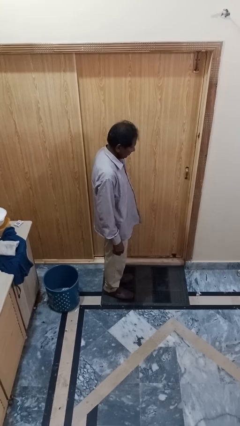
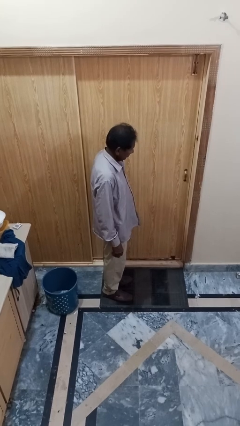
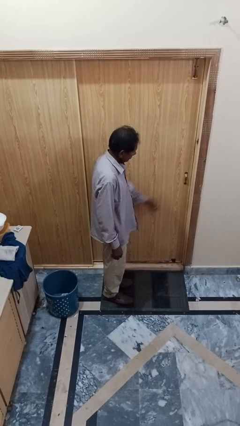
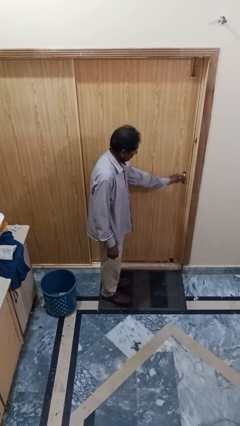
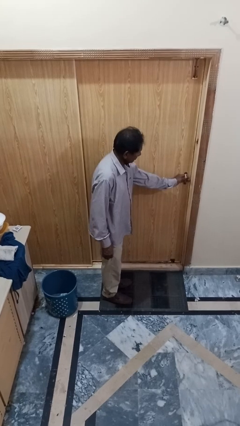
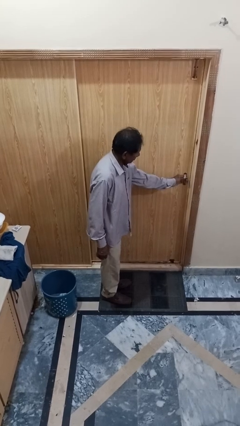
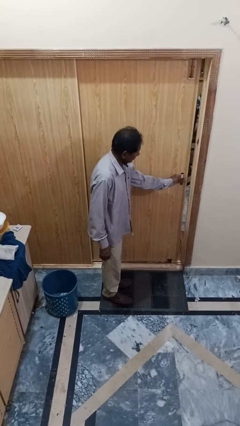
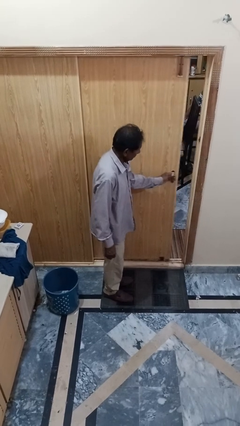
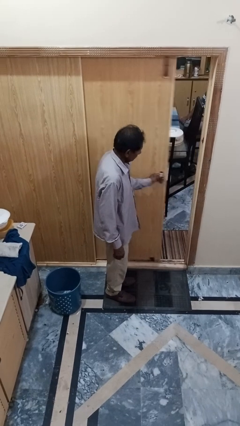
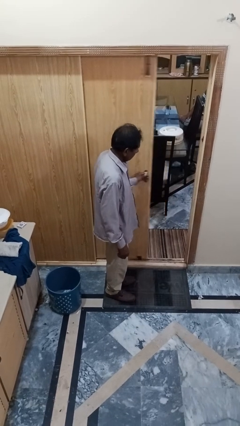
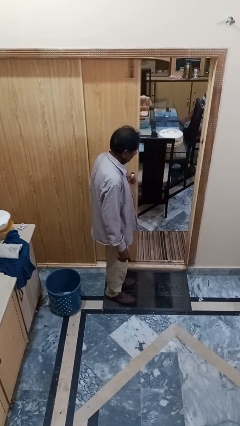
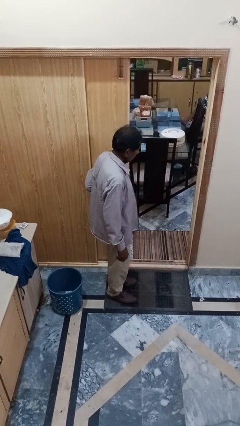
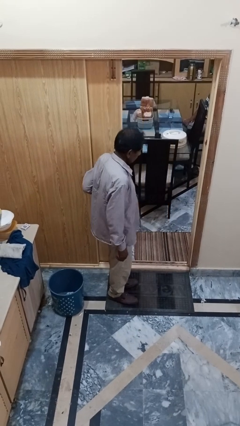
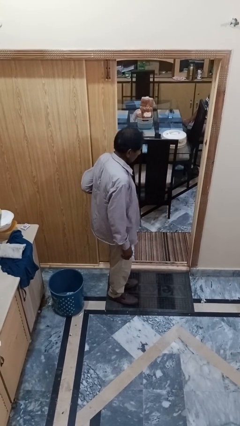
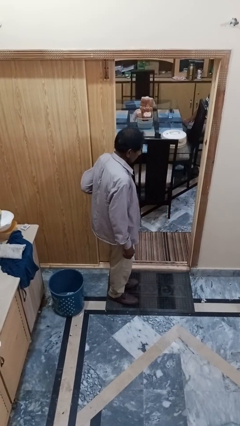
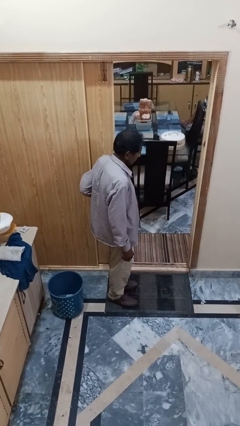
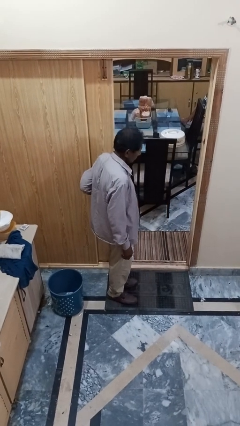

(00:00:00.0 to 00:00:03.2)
person opens sliding door

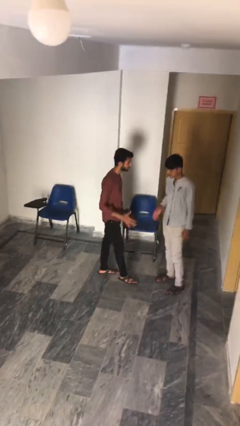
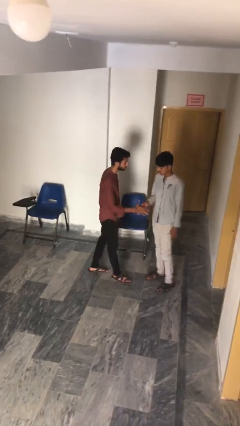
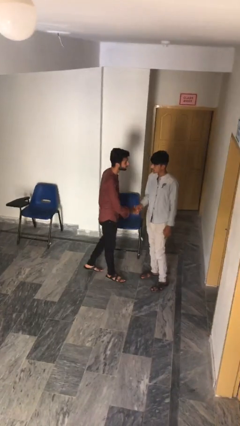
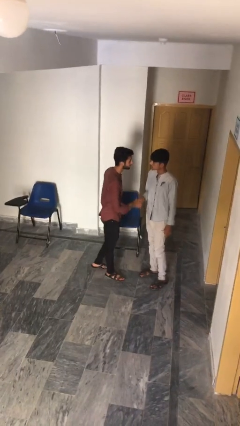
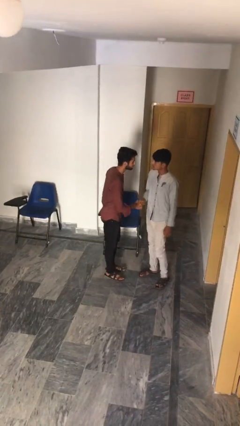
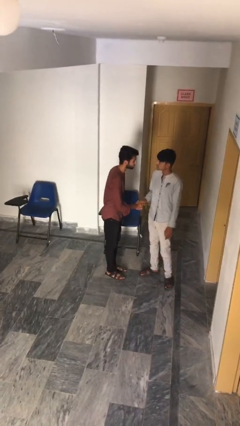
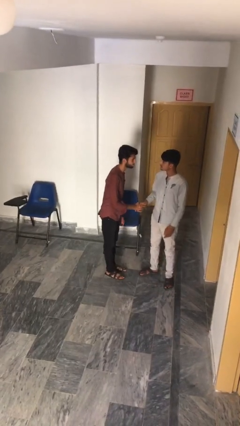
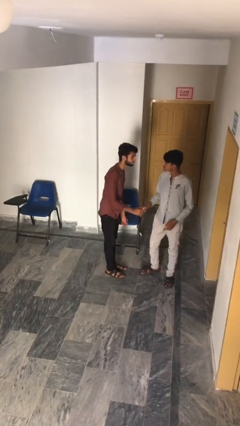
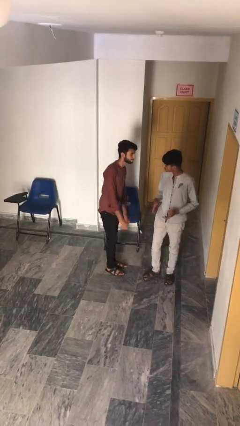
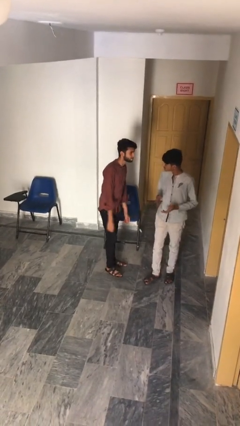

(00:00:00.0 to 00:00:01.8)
person shakes hand

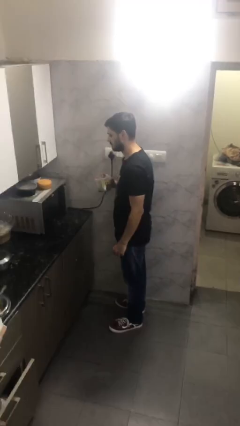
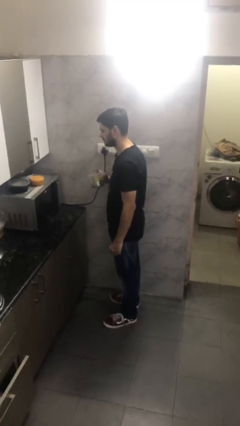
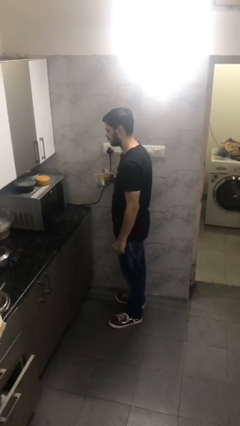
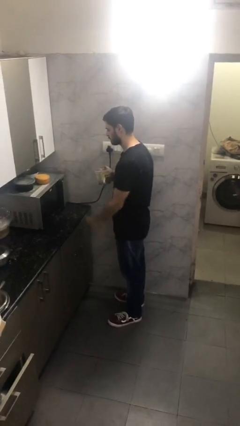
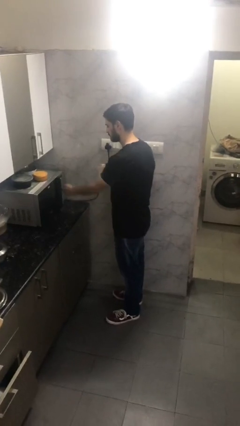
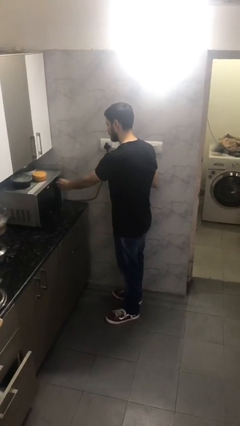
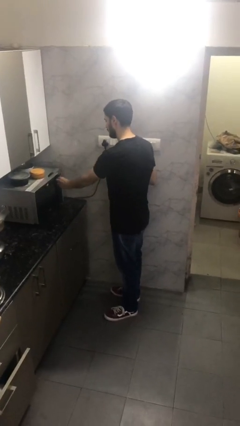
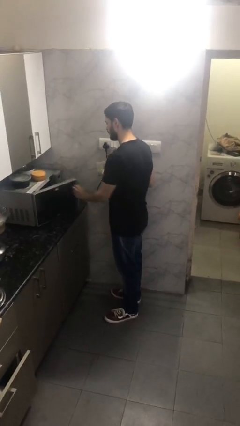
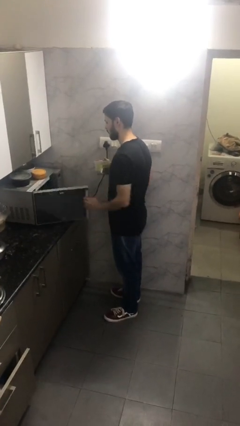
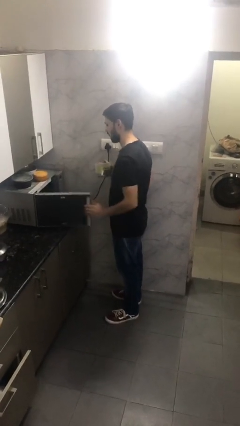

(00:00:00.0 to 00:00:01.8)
person opens microwave

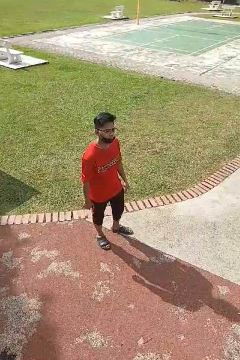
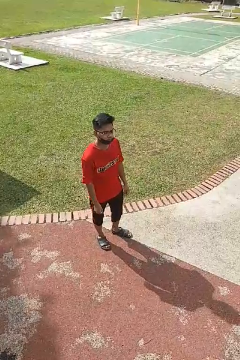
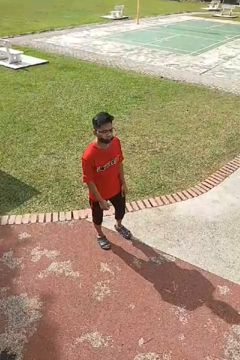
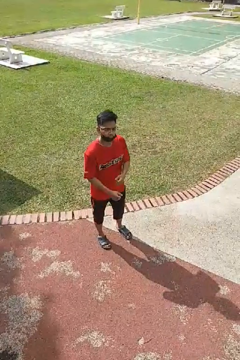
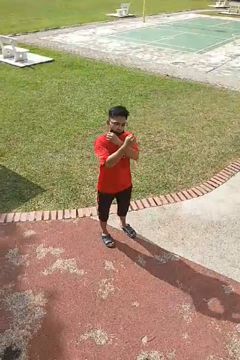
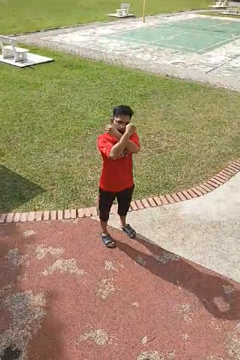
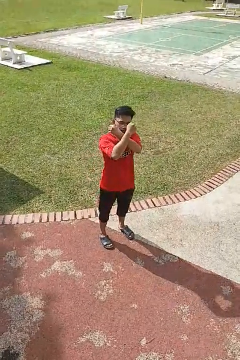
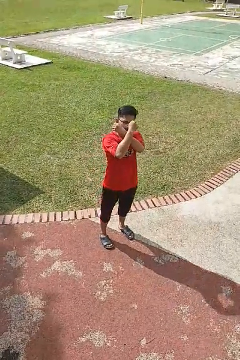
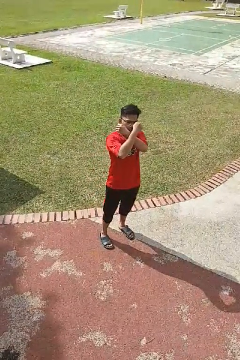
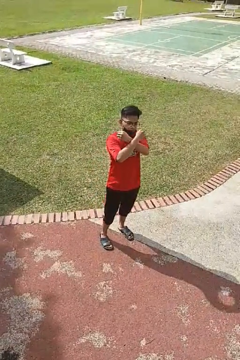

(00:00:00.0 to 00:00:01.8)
person gestures arms x

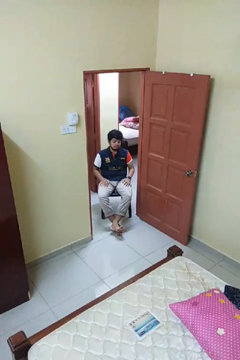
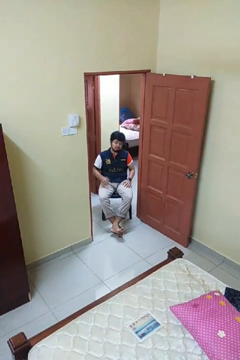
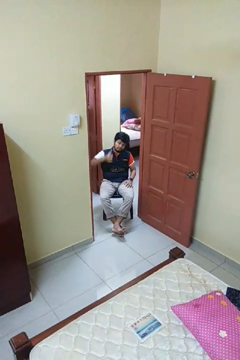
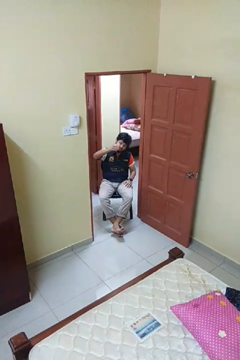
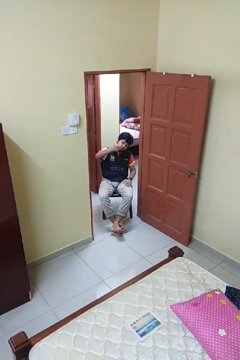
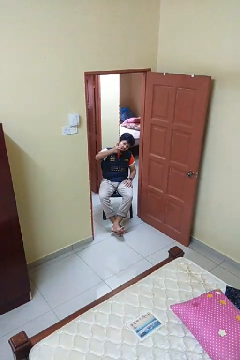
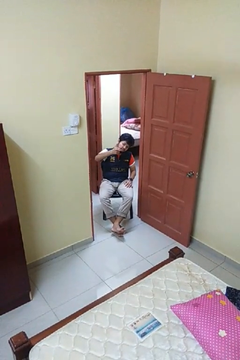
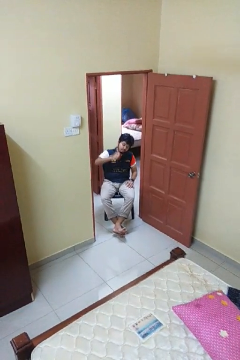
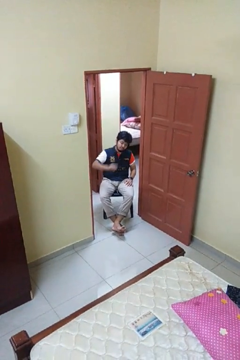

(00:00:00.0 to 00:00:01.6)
person gestures thumbs up

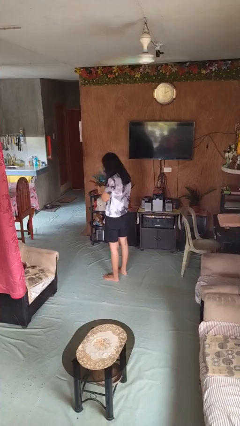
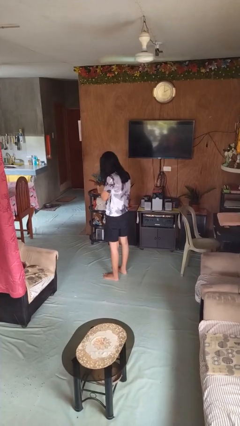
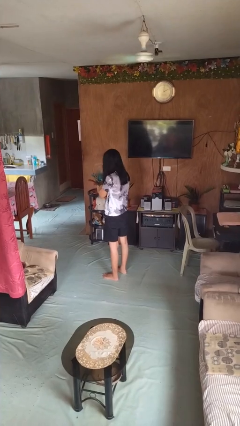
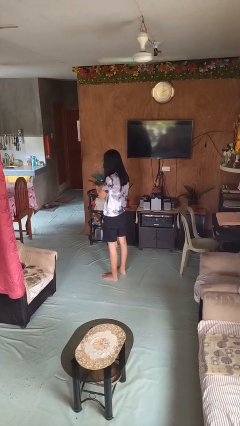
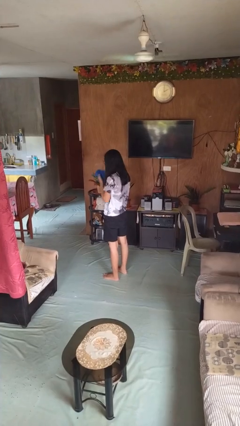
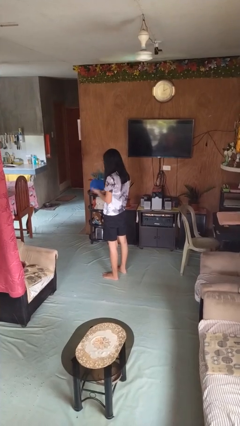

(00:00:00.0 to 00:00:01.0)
person blows nose

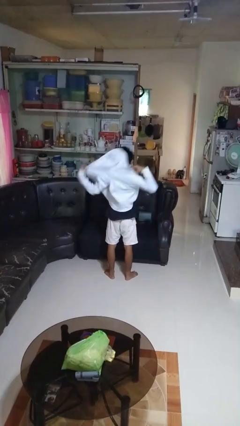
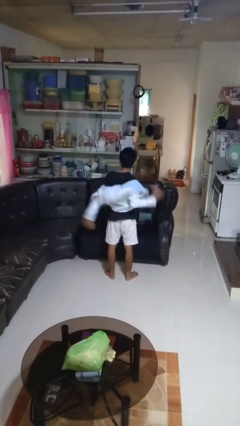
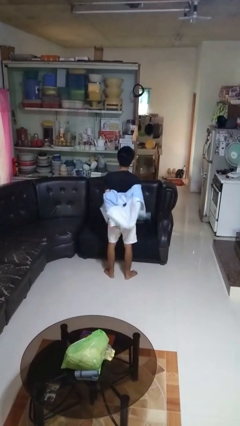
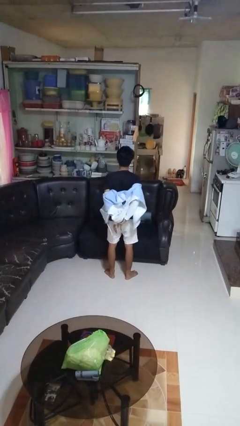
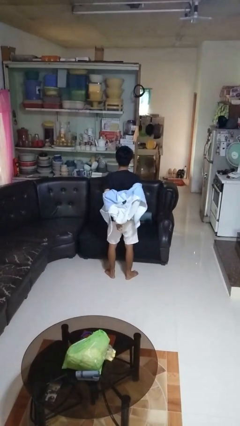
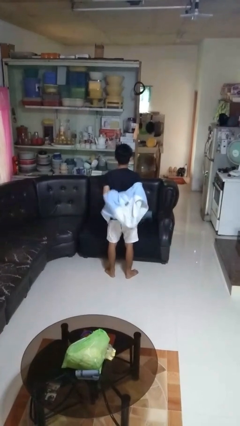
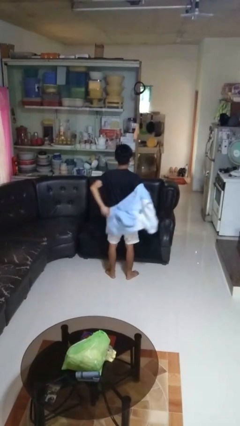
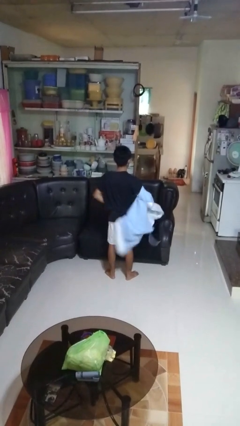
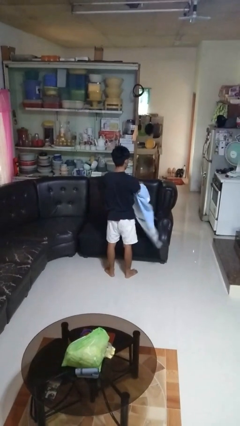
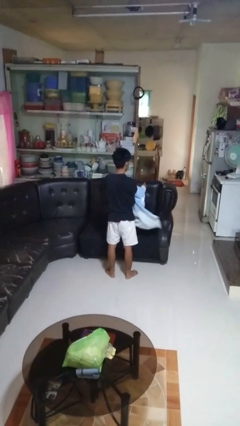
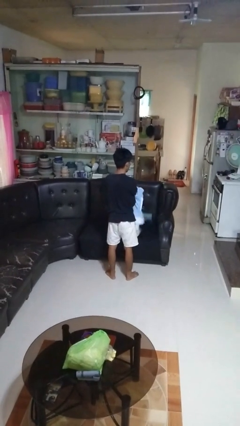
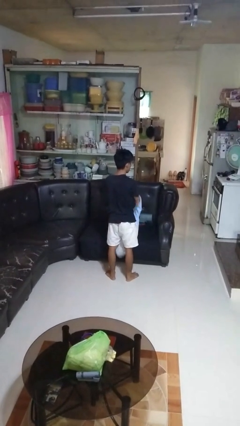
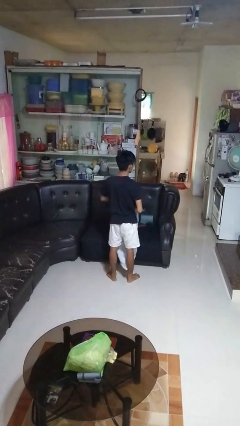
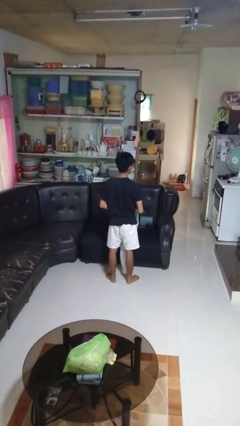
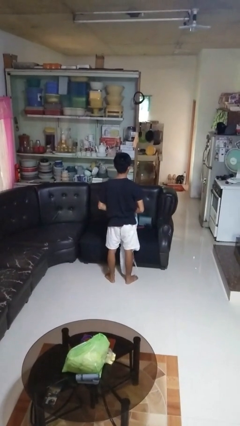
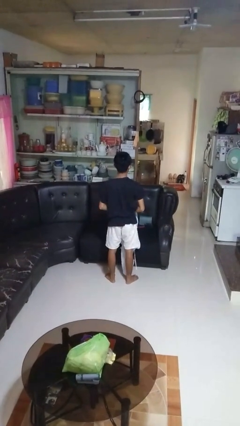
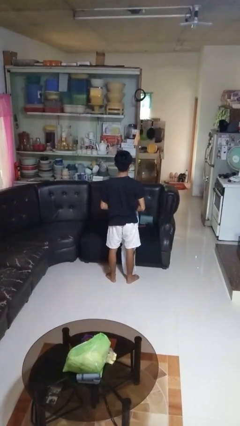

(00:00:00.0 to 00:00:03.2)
person takes off hoodie

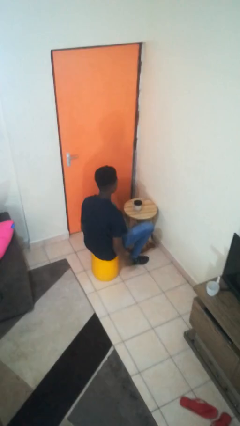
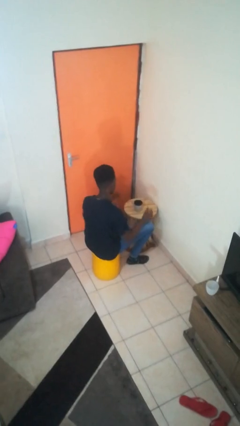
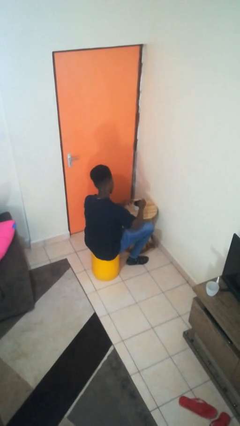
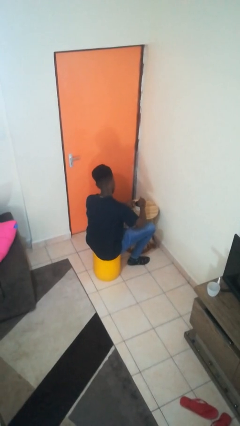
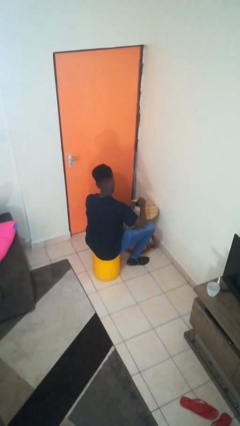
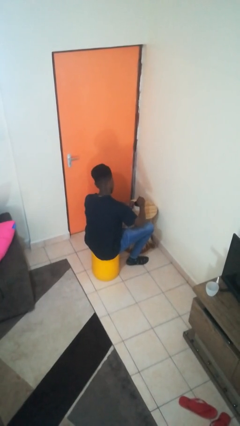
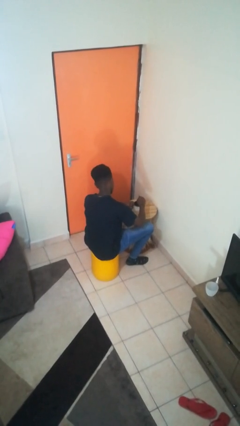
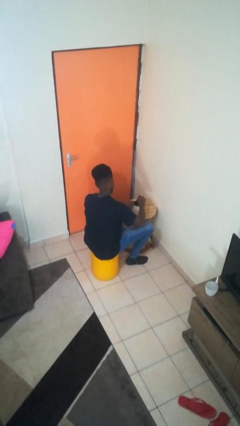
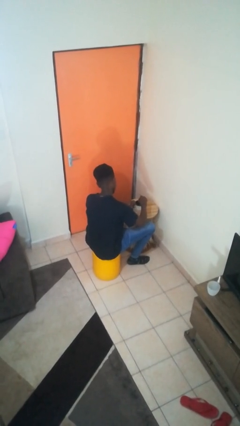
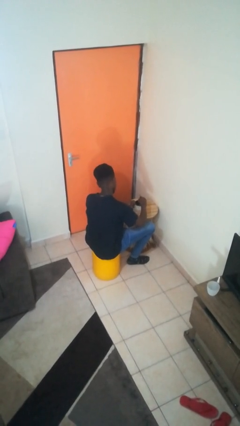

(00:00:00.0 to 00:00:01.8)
person stirs mug

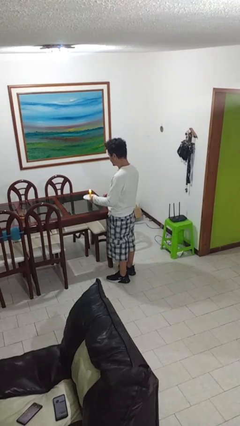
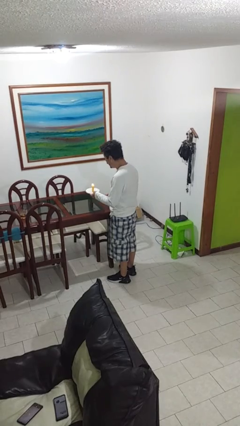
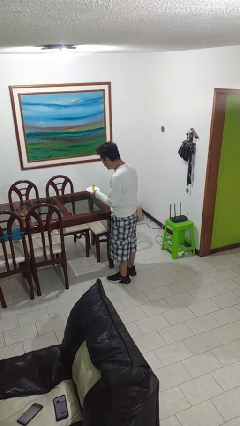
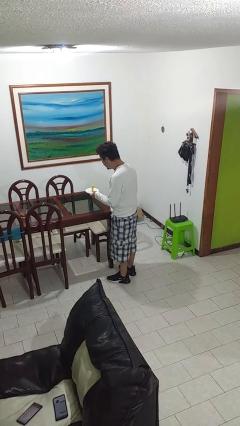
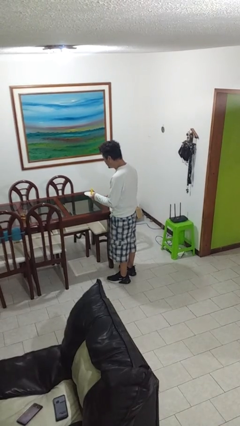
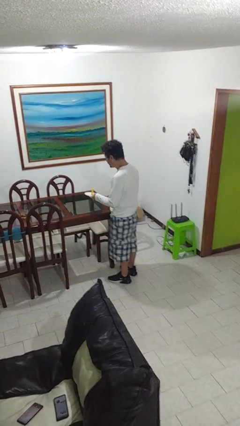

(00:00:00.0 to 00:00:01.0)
person extinguishes candle
